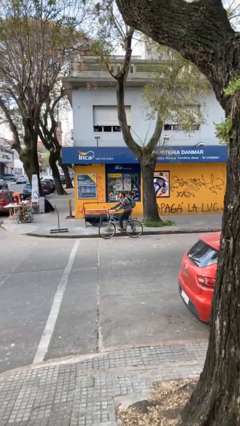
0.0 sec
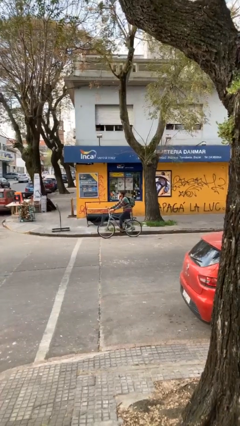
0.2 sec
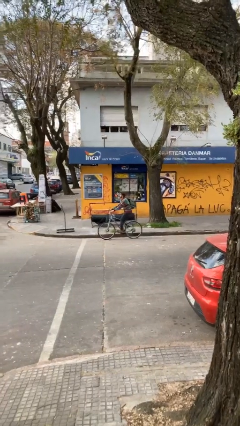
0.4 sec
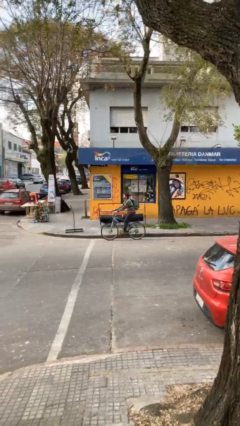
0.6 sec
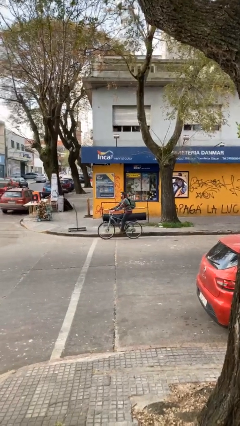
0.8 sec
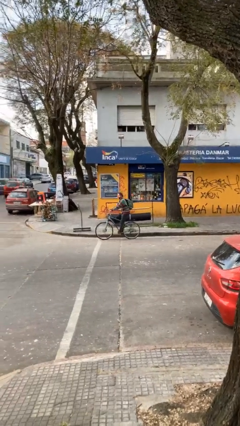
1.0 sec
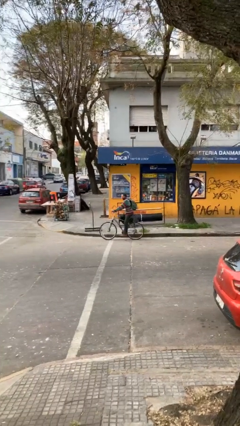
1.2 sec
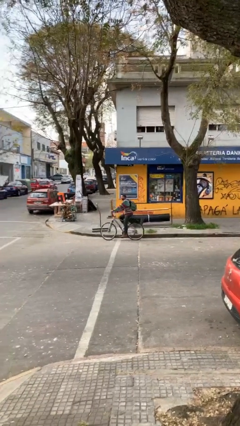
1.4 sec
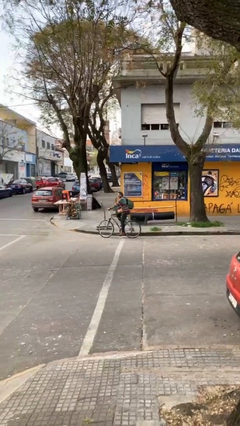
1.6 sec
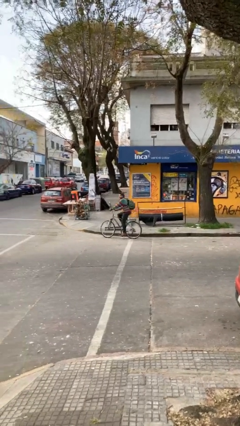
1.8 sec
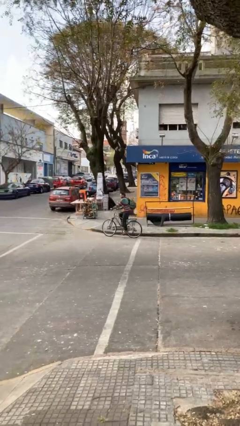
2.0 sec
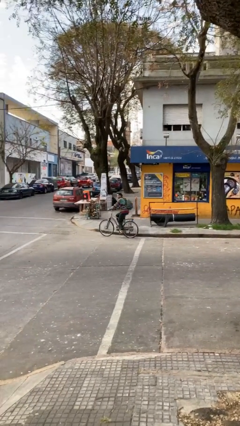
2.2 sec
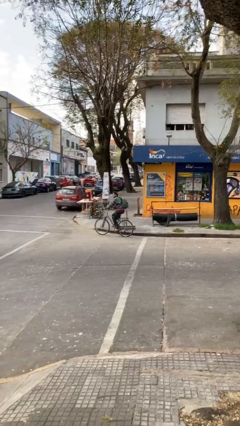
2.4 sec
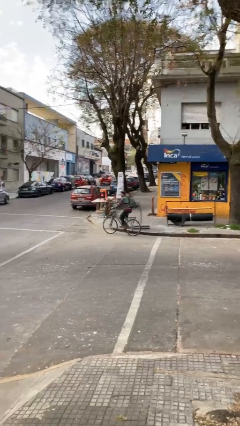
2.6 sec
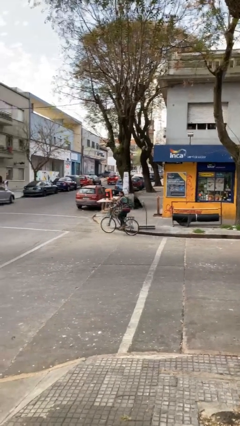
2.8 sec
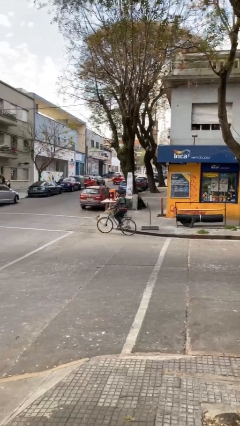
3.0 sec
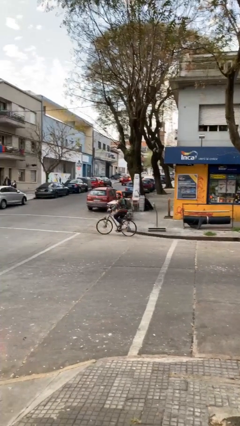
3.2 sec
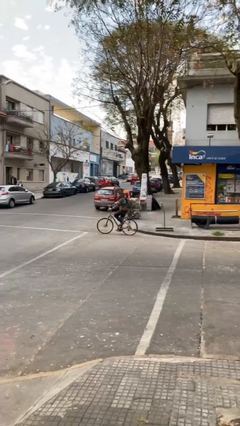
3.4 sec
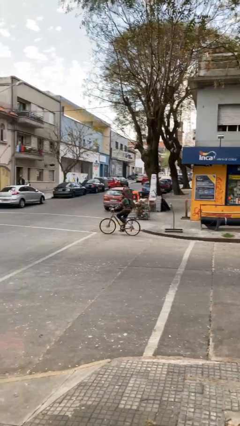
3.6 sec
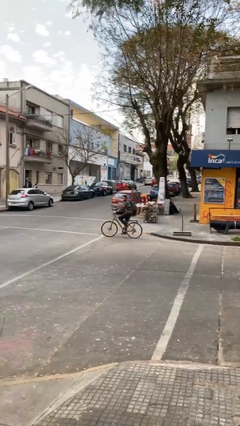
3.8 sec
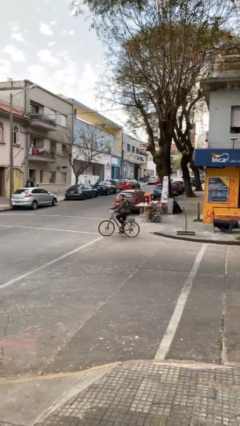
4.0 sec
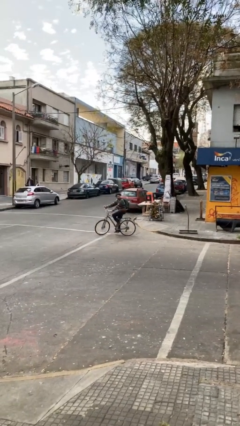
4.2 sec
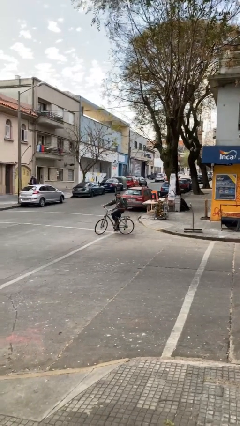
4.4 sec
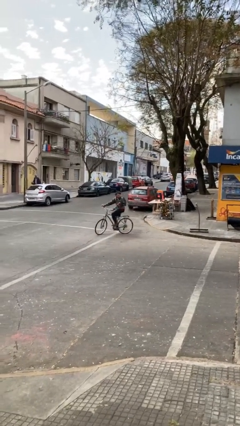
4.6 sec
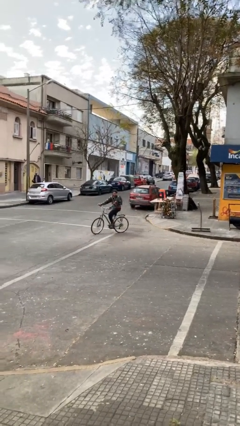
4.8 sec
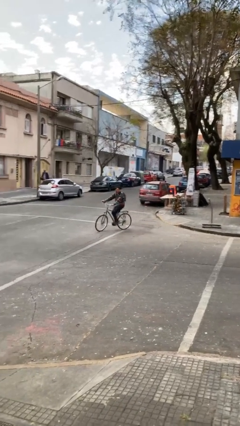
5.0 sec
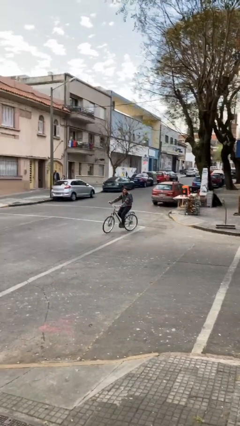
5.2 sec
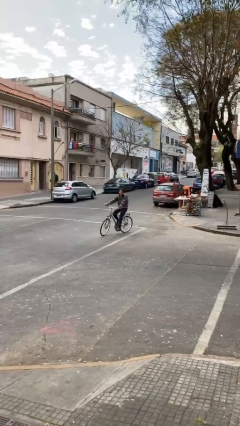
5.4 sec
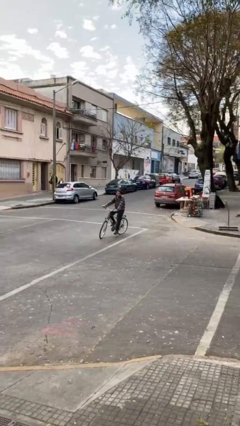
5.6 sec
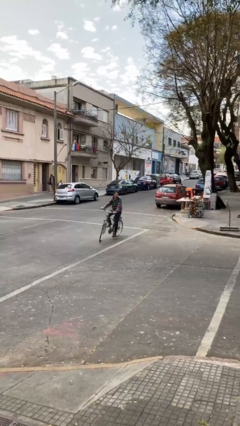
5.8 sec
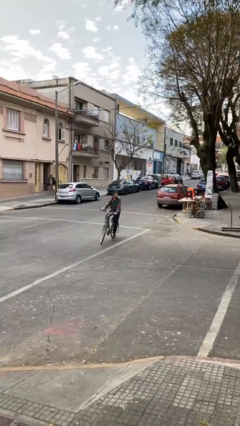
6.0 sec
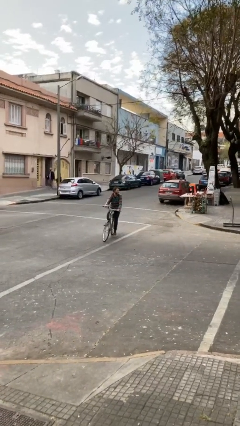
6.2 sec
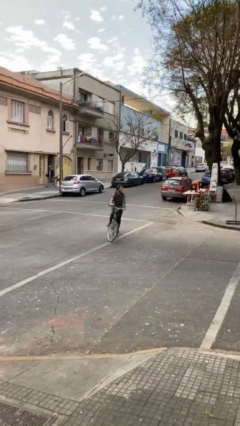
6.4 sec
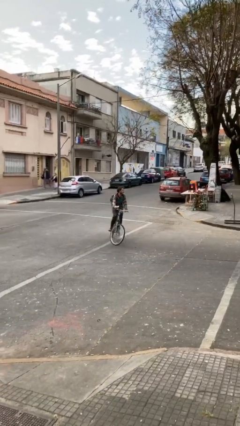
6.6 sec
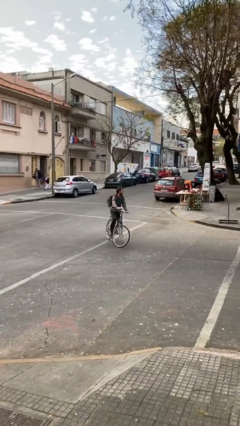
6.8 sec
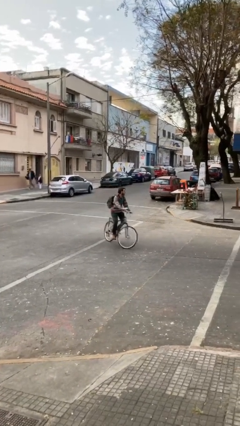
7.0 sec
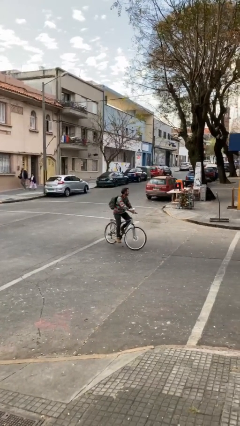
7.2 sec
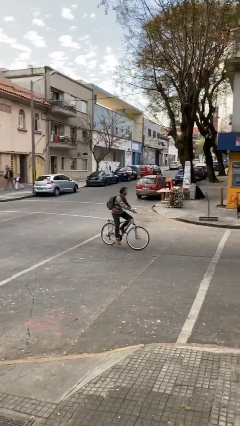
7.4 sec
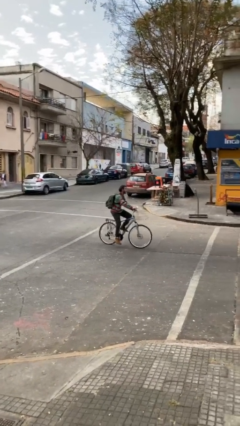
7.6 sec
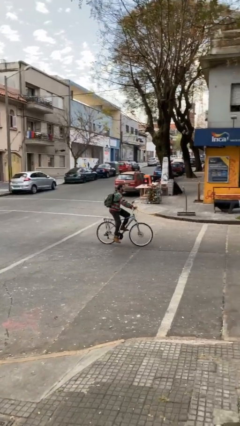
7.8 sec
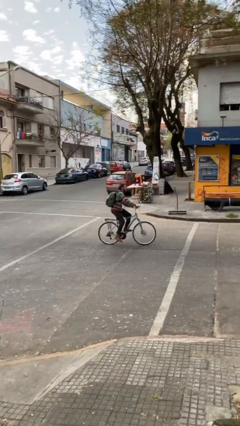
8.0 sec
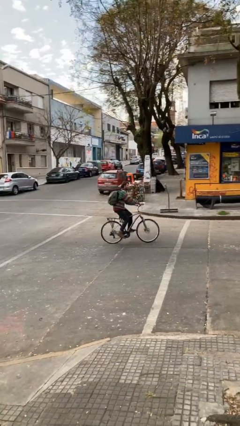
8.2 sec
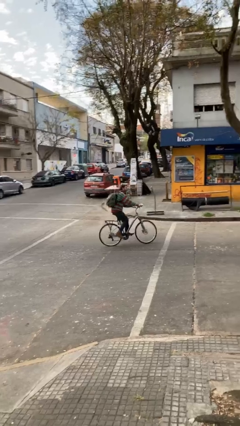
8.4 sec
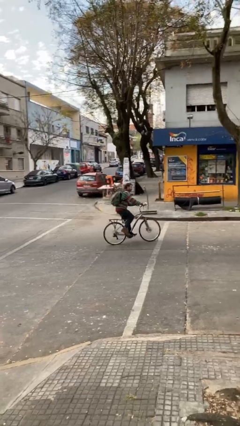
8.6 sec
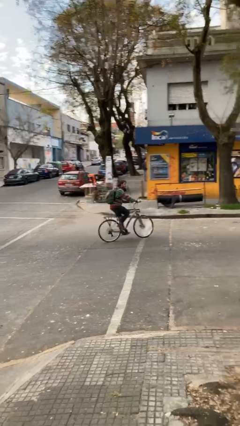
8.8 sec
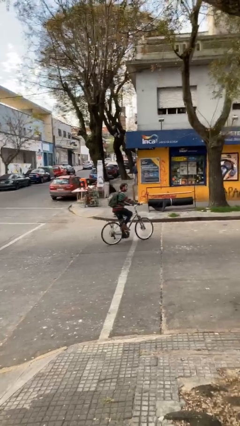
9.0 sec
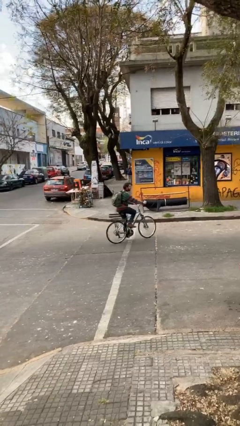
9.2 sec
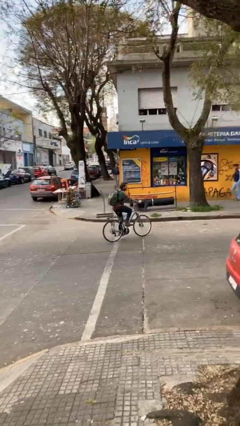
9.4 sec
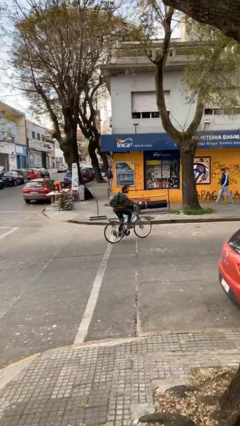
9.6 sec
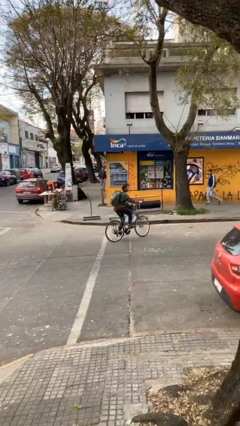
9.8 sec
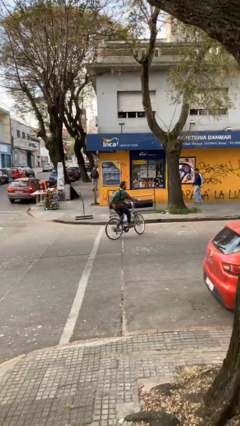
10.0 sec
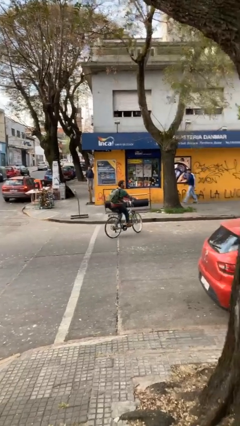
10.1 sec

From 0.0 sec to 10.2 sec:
person rides bicycle

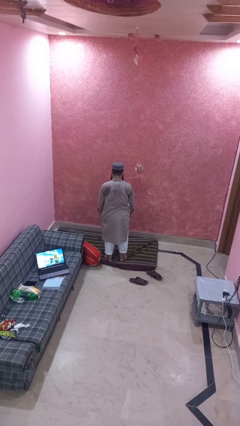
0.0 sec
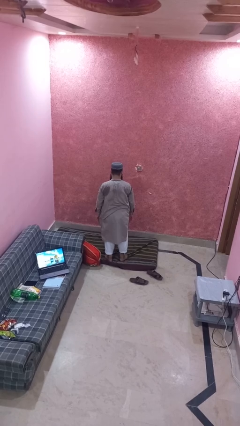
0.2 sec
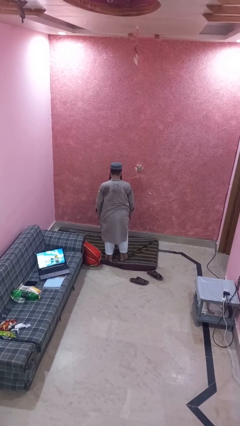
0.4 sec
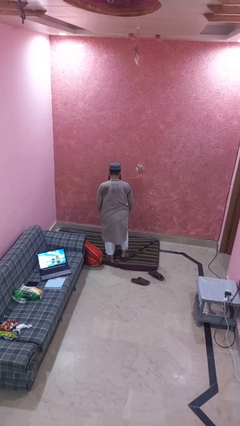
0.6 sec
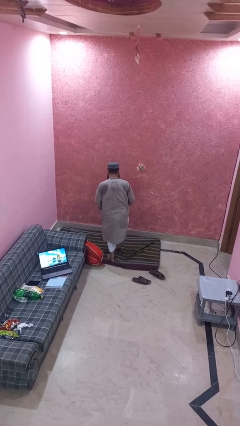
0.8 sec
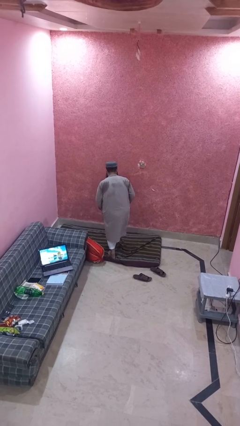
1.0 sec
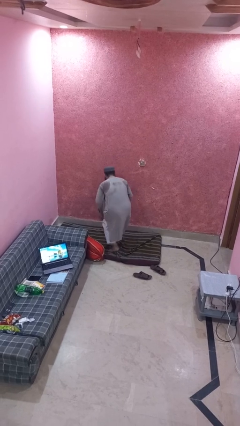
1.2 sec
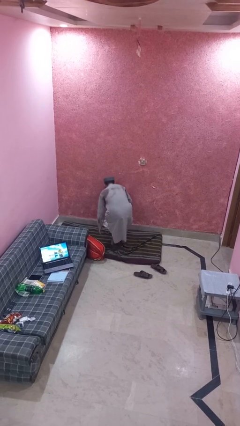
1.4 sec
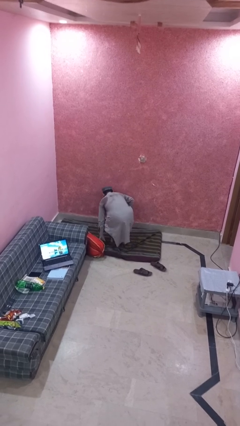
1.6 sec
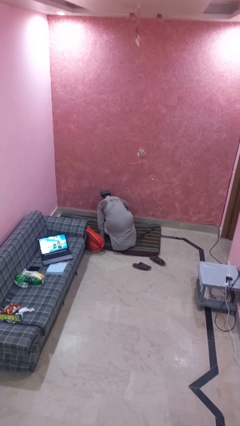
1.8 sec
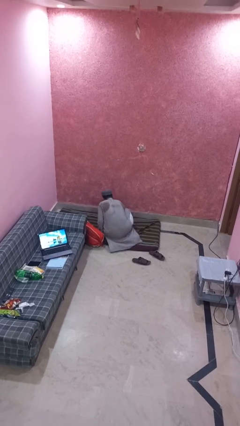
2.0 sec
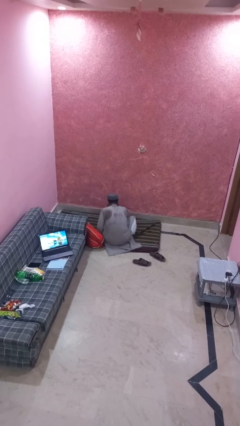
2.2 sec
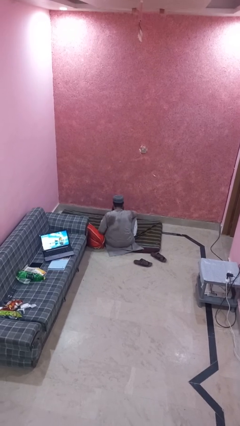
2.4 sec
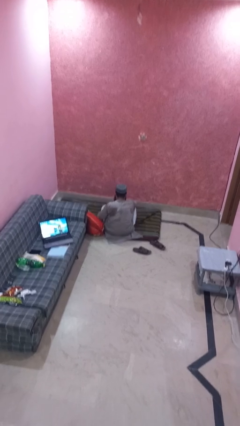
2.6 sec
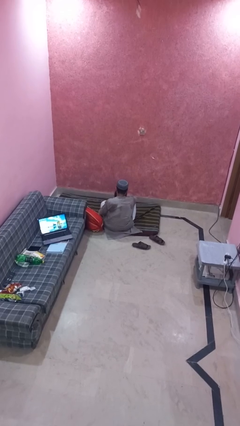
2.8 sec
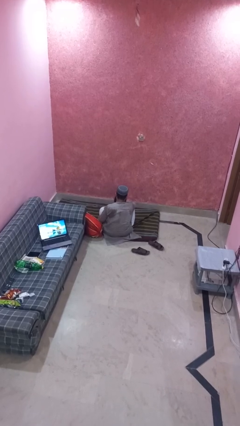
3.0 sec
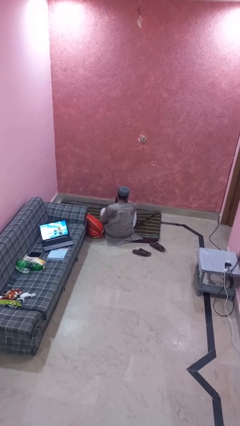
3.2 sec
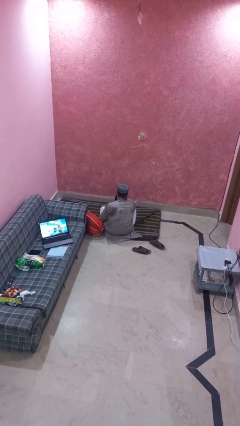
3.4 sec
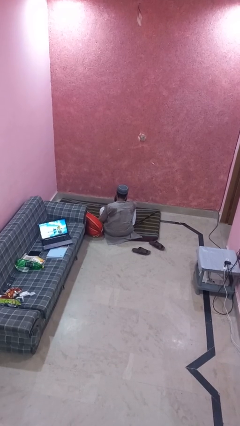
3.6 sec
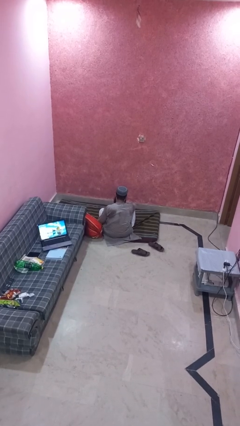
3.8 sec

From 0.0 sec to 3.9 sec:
person sits crisscross

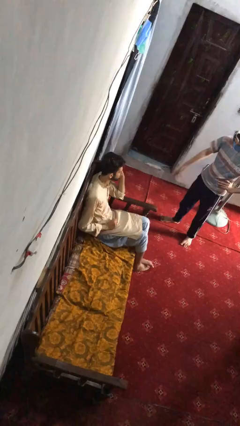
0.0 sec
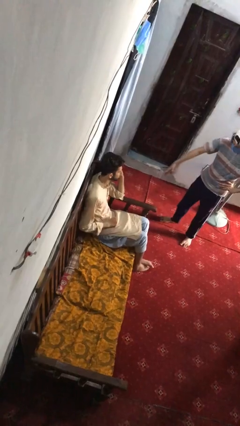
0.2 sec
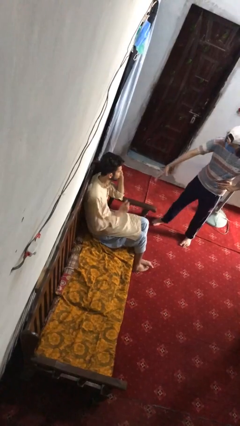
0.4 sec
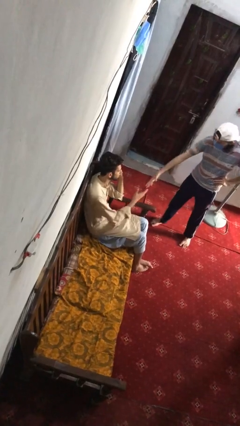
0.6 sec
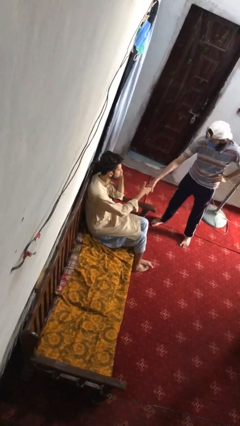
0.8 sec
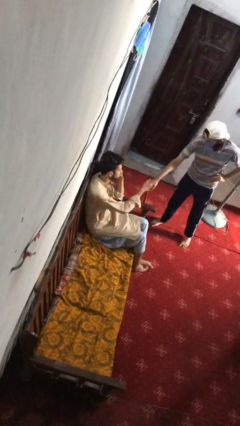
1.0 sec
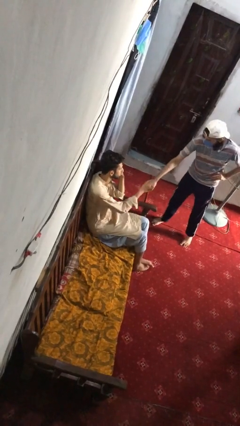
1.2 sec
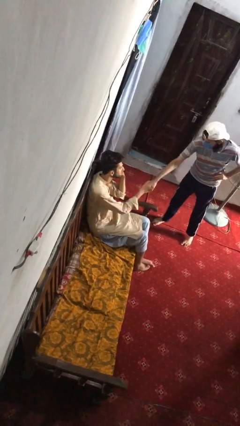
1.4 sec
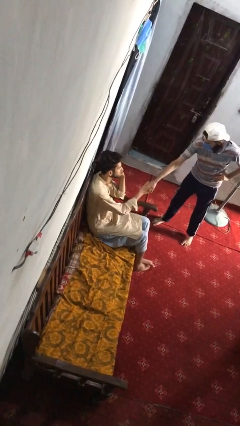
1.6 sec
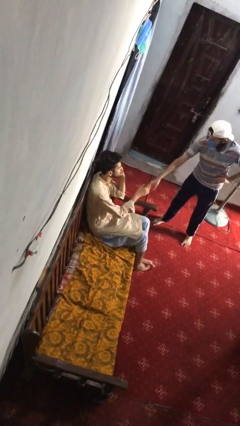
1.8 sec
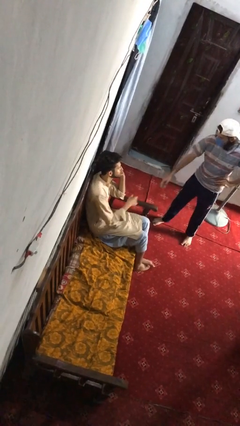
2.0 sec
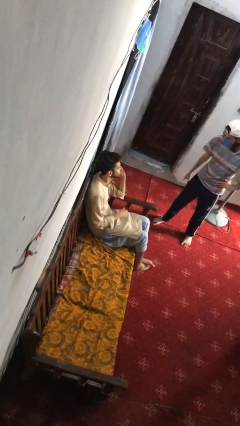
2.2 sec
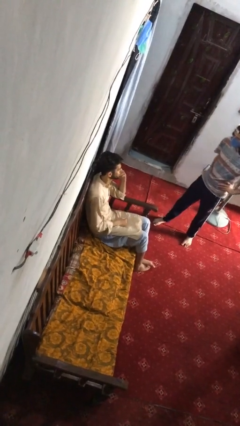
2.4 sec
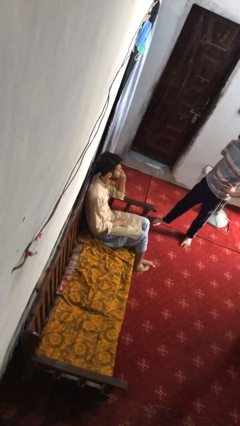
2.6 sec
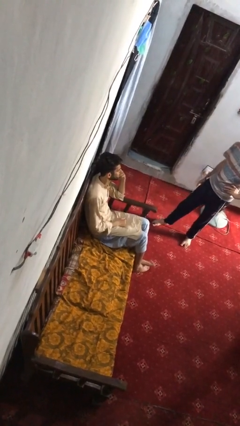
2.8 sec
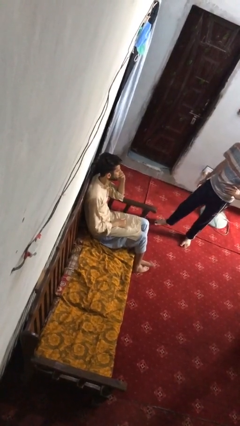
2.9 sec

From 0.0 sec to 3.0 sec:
person shakes hand

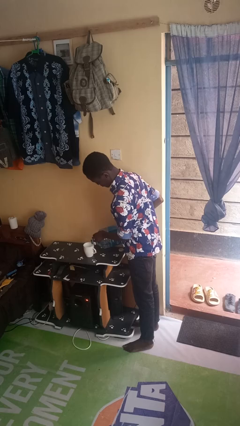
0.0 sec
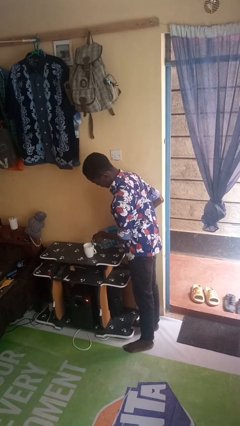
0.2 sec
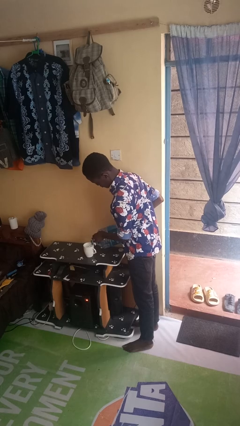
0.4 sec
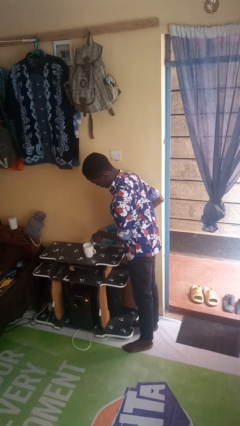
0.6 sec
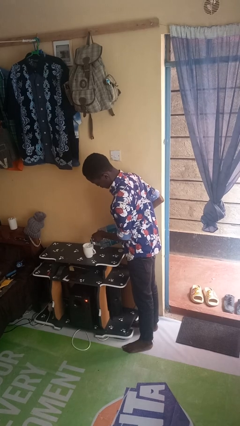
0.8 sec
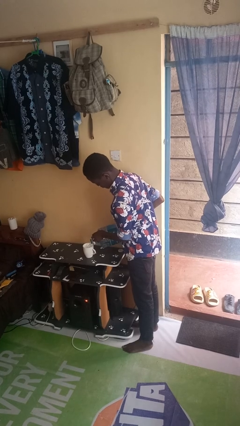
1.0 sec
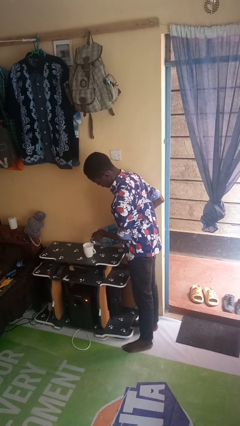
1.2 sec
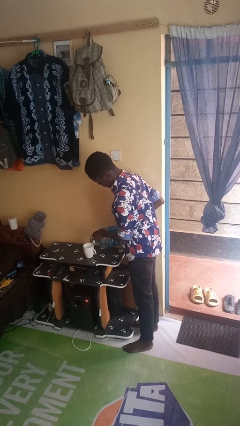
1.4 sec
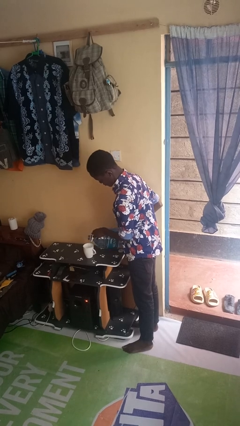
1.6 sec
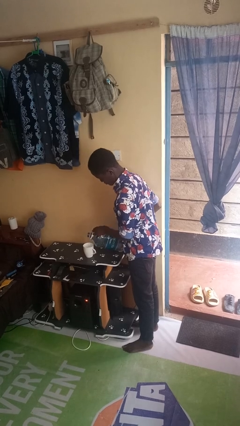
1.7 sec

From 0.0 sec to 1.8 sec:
person pours liquid into cup
